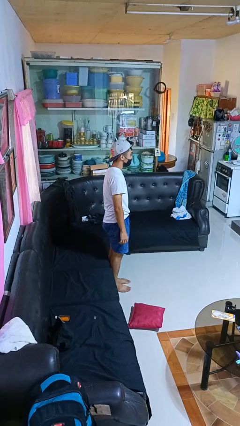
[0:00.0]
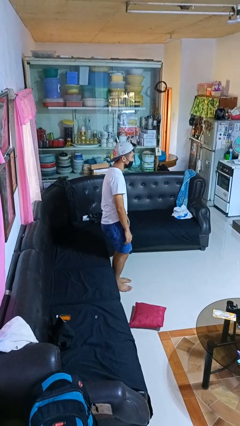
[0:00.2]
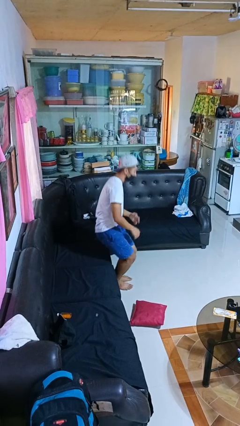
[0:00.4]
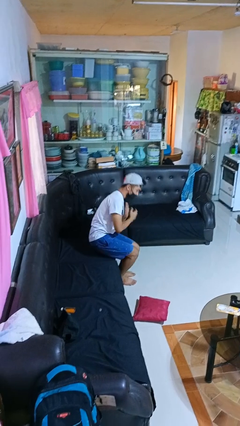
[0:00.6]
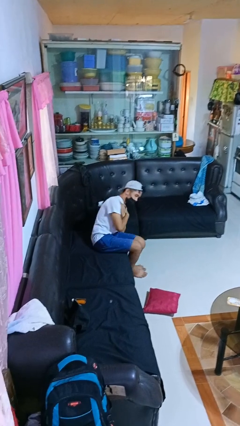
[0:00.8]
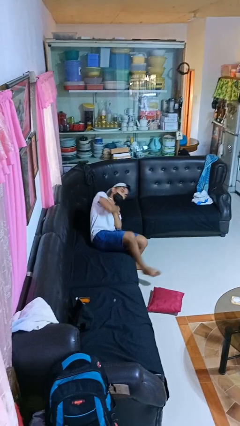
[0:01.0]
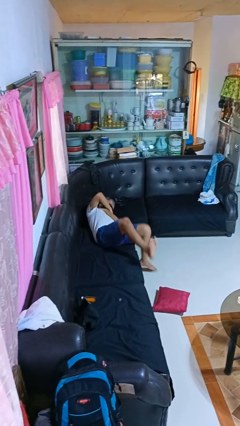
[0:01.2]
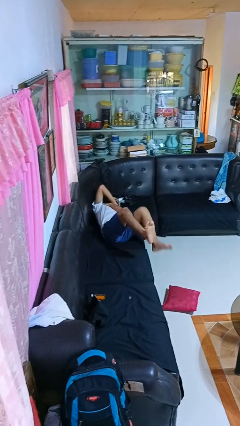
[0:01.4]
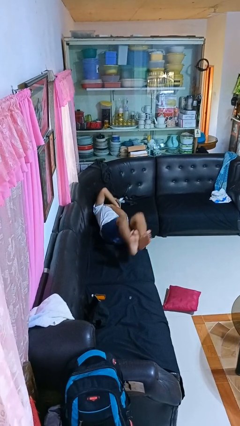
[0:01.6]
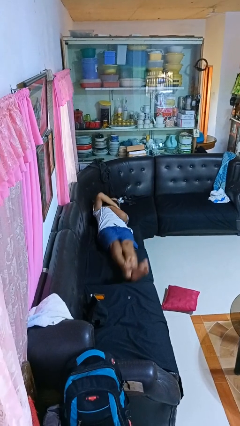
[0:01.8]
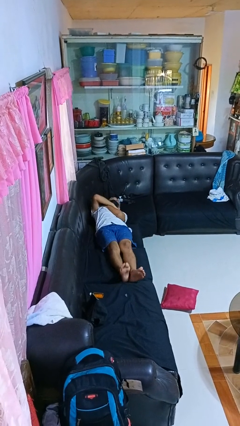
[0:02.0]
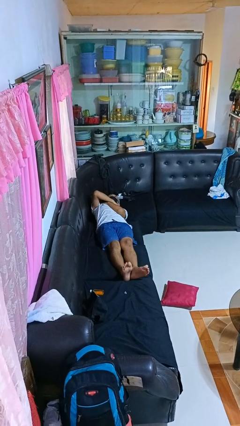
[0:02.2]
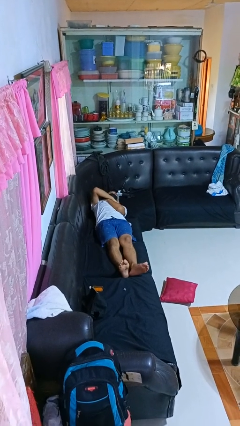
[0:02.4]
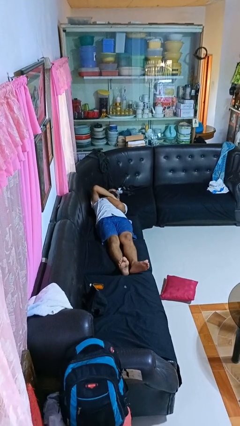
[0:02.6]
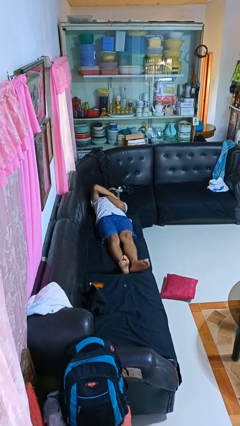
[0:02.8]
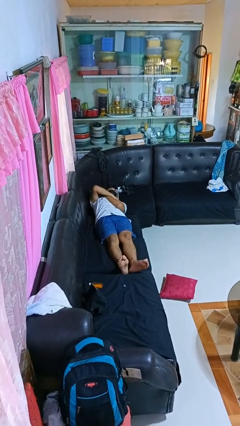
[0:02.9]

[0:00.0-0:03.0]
person lies down on couch

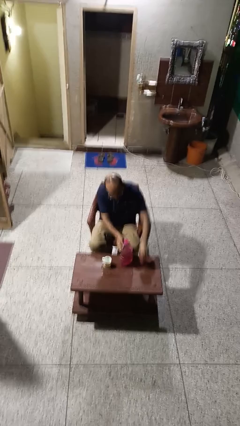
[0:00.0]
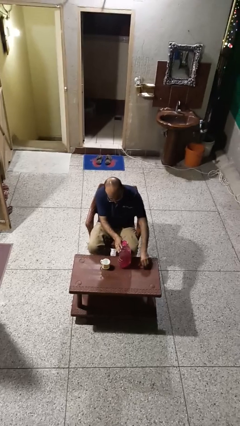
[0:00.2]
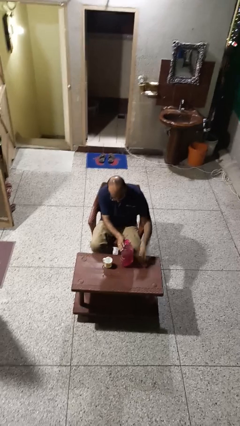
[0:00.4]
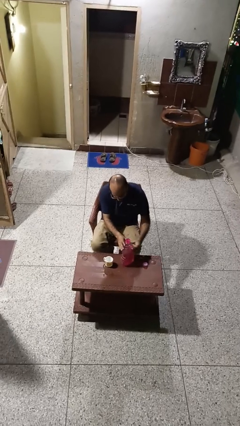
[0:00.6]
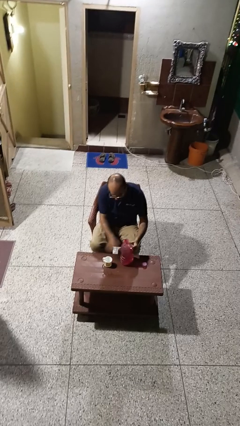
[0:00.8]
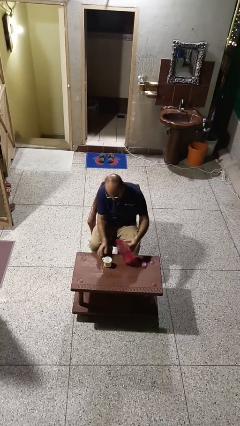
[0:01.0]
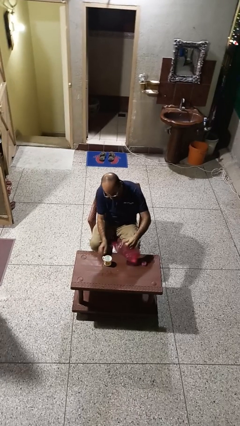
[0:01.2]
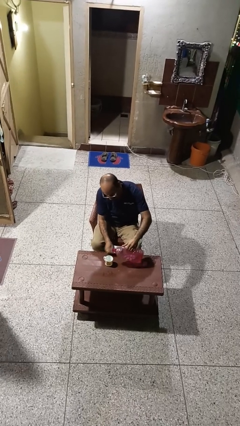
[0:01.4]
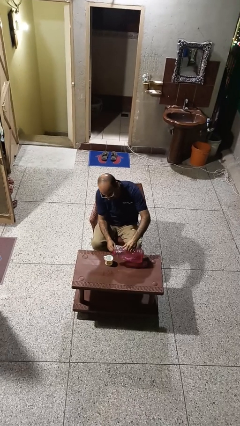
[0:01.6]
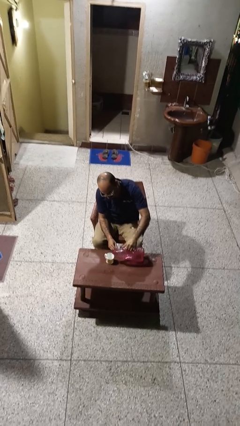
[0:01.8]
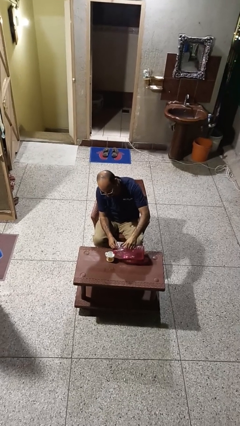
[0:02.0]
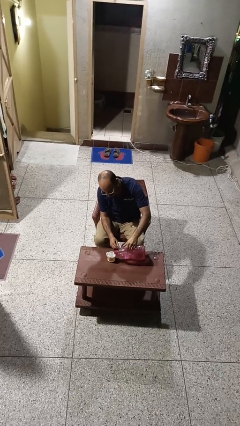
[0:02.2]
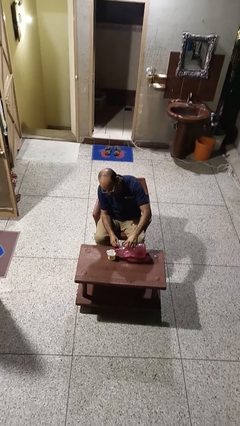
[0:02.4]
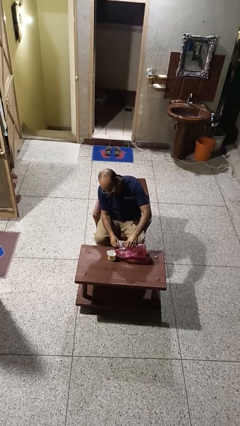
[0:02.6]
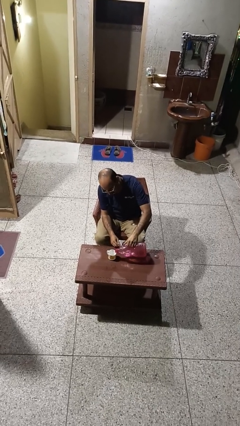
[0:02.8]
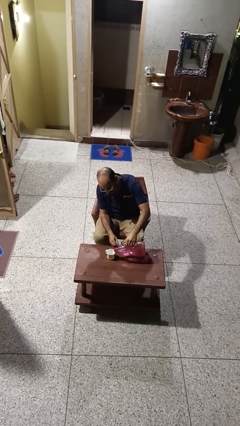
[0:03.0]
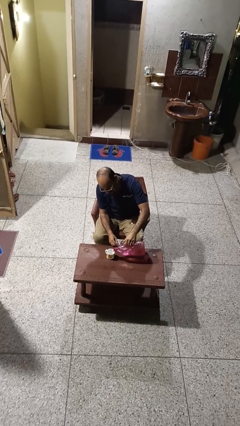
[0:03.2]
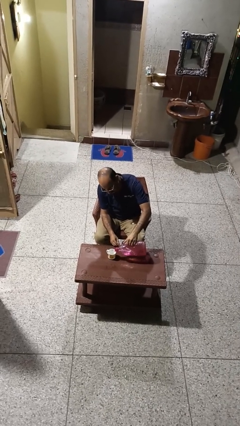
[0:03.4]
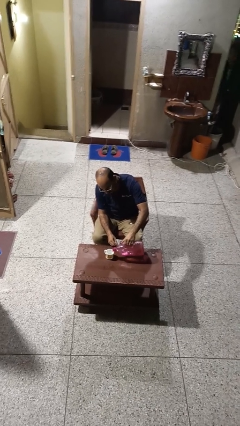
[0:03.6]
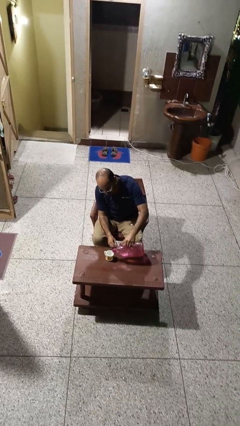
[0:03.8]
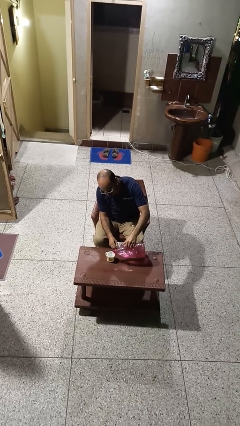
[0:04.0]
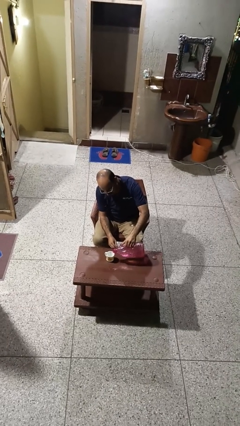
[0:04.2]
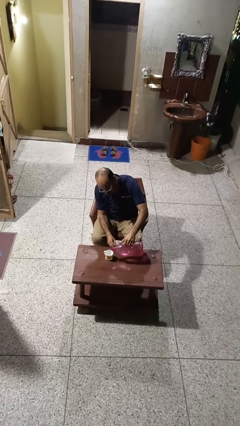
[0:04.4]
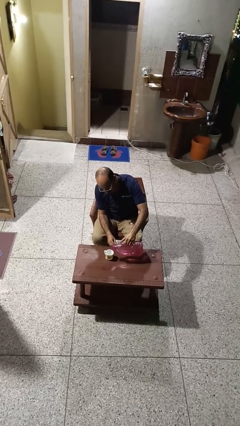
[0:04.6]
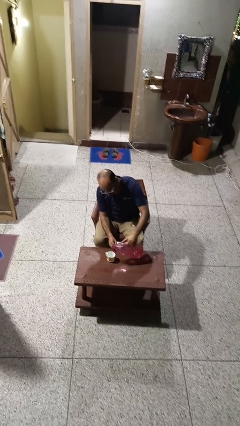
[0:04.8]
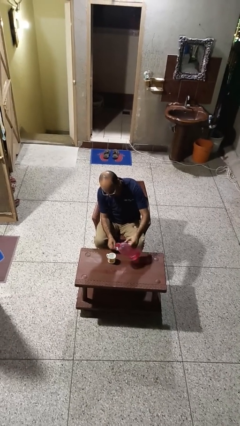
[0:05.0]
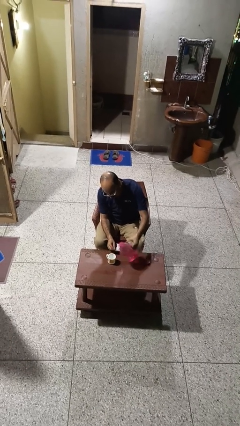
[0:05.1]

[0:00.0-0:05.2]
person pours liquid into cup

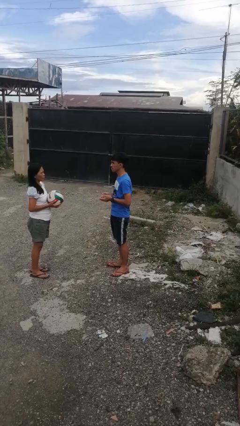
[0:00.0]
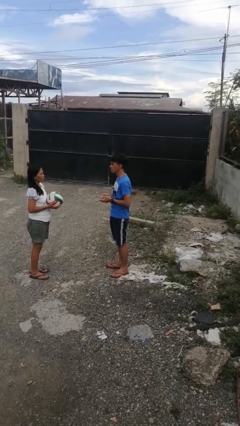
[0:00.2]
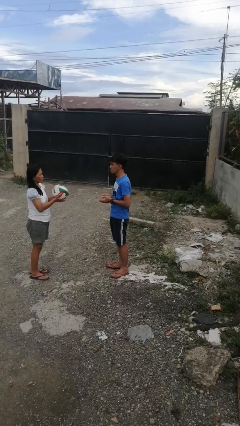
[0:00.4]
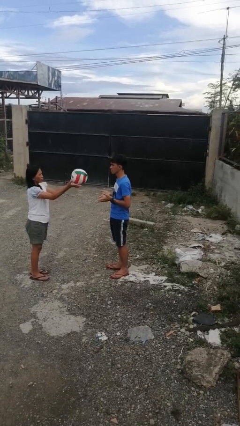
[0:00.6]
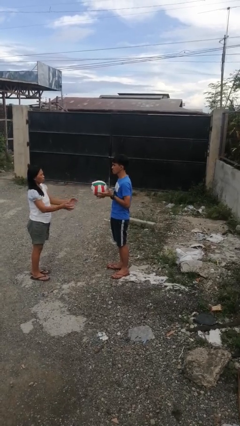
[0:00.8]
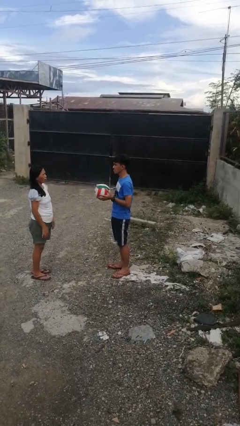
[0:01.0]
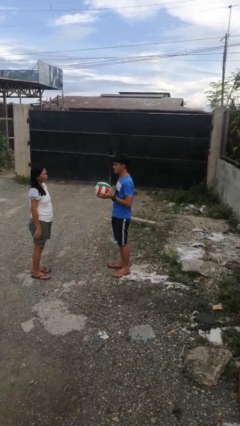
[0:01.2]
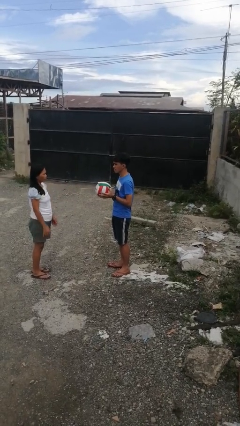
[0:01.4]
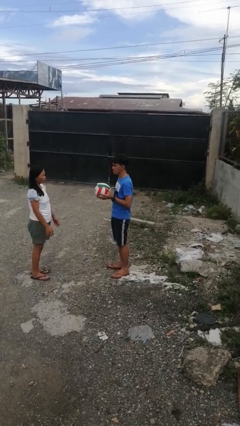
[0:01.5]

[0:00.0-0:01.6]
person catches object from person

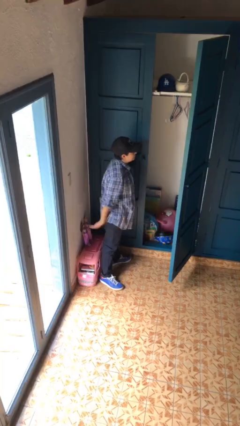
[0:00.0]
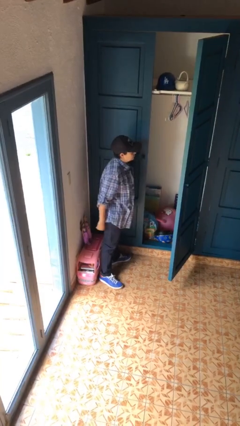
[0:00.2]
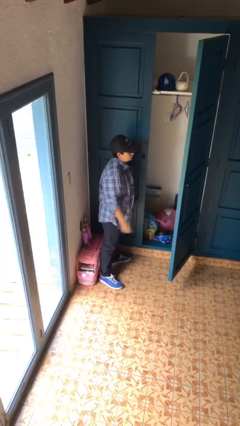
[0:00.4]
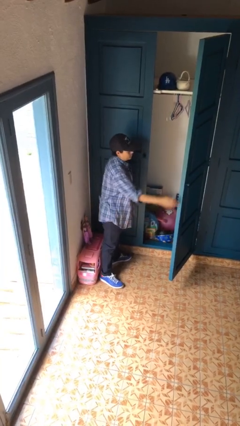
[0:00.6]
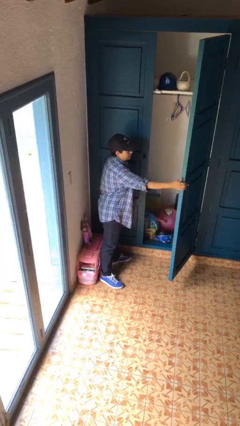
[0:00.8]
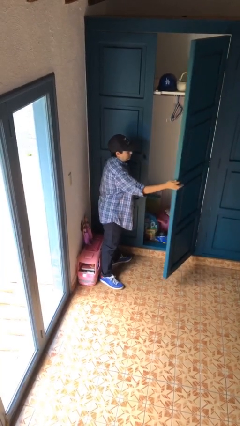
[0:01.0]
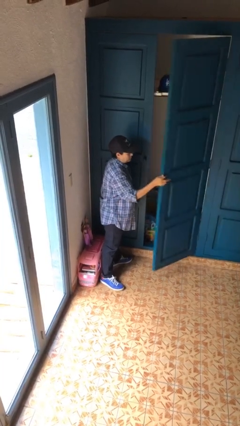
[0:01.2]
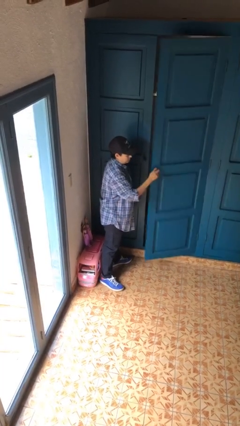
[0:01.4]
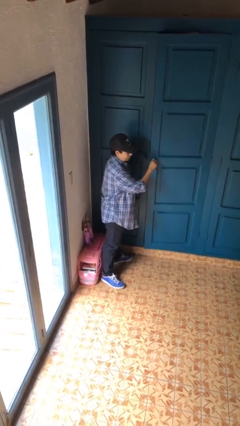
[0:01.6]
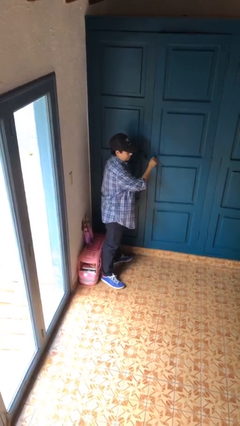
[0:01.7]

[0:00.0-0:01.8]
person closes closet door

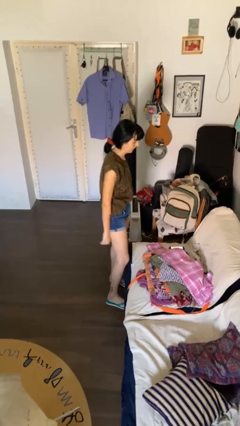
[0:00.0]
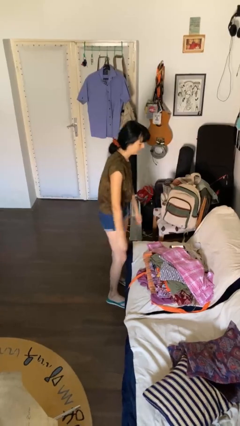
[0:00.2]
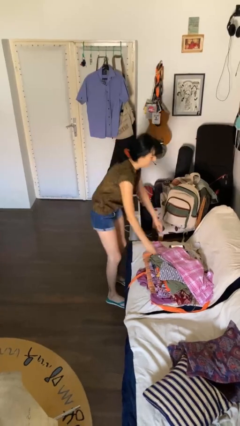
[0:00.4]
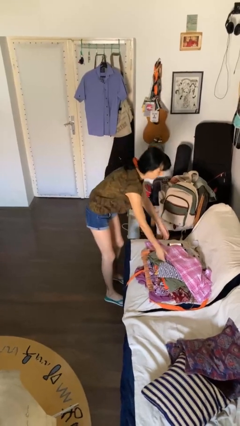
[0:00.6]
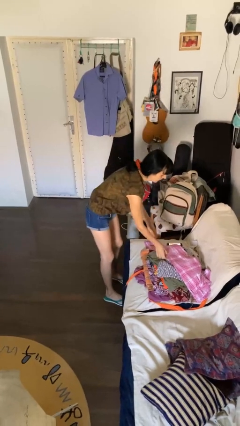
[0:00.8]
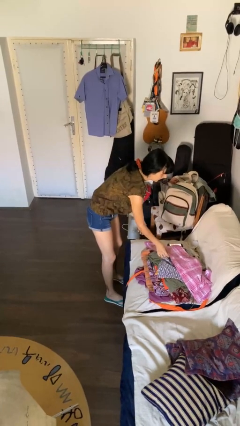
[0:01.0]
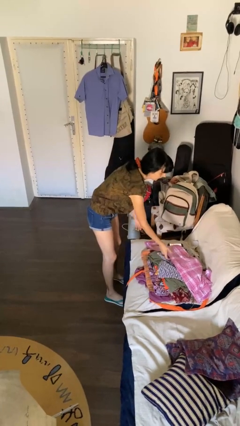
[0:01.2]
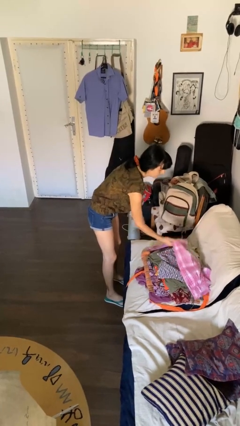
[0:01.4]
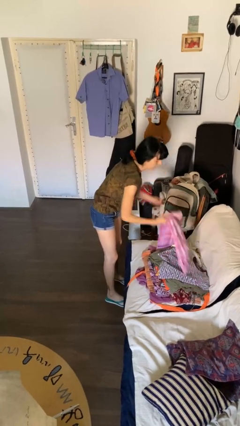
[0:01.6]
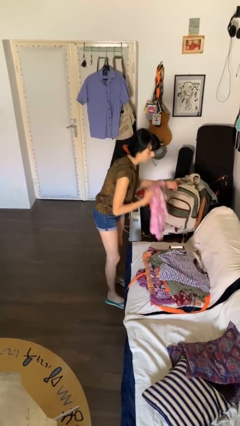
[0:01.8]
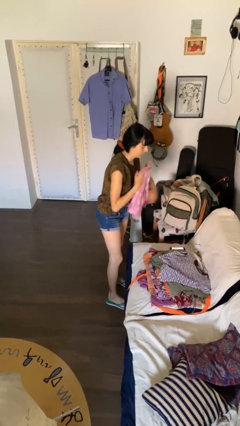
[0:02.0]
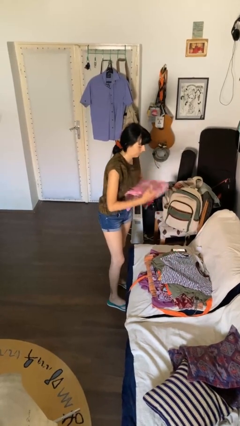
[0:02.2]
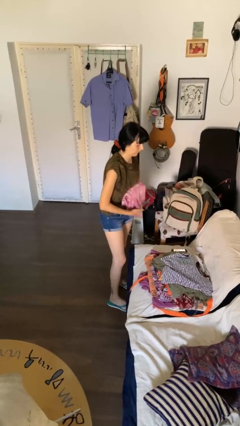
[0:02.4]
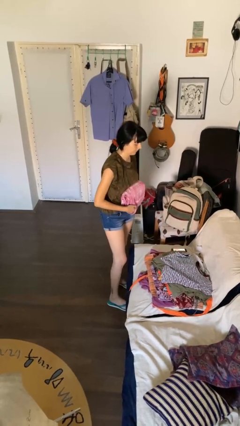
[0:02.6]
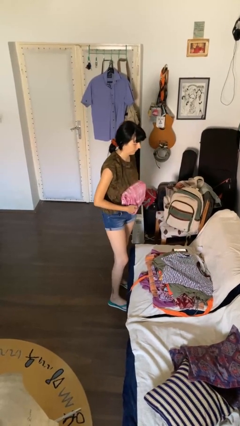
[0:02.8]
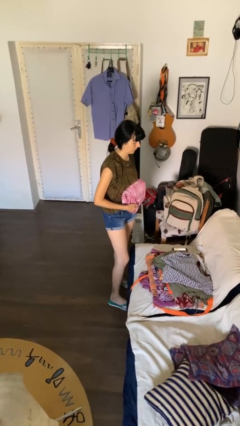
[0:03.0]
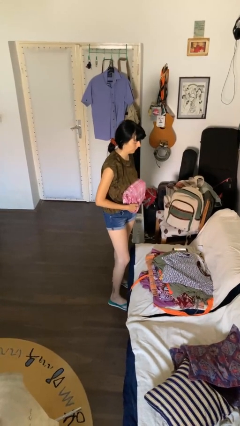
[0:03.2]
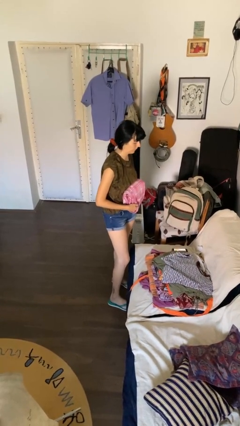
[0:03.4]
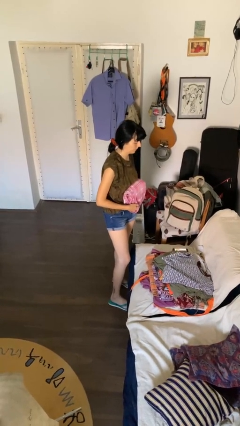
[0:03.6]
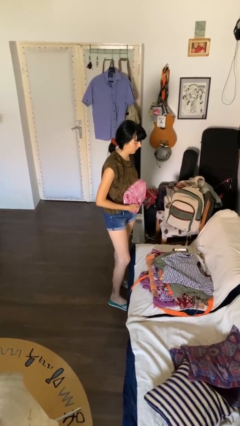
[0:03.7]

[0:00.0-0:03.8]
person folds pants

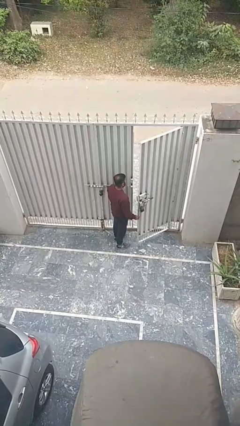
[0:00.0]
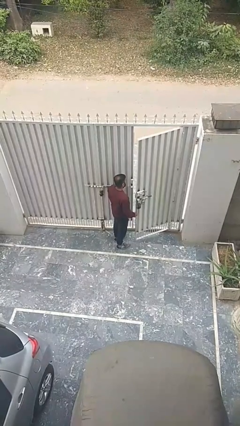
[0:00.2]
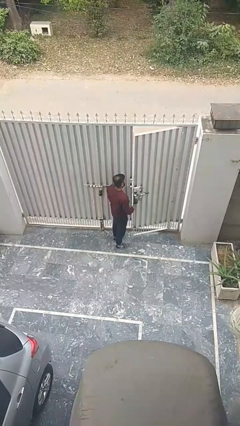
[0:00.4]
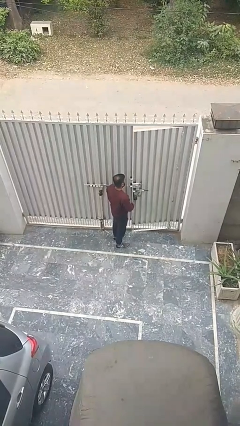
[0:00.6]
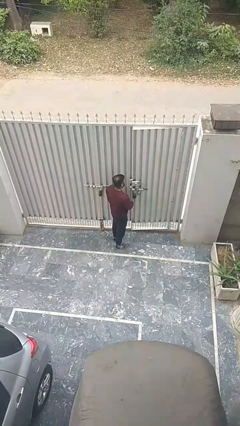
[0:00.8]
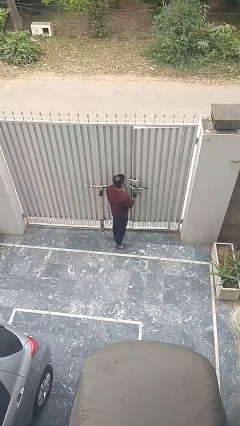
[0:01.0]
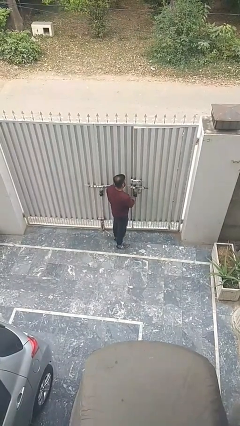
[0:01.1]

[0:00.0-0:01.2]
person closes facility door

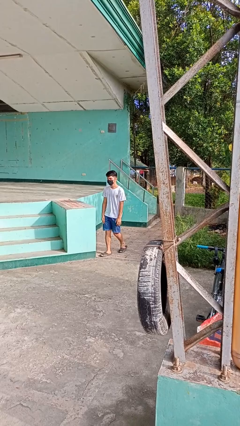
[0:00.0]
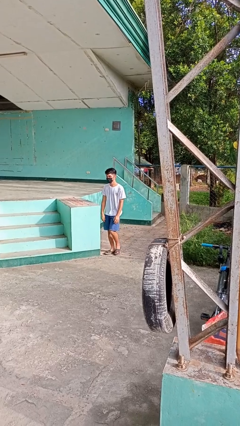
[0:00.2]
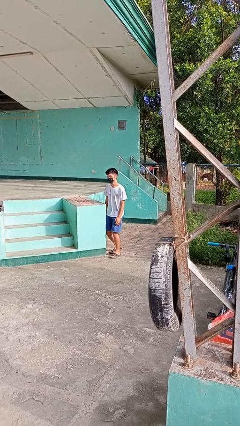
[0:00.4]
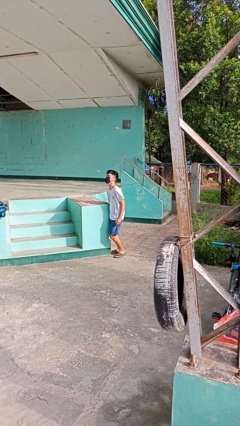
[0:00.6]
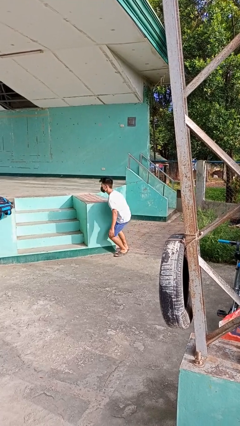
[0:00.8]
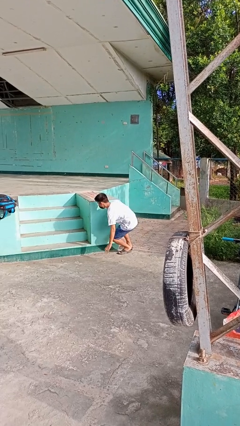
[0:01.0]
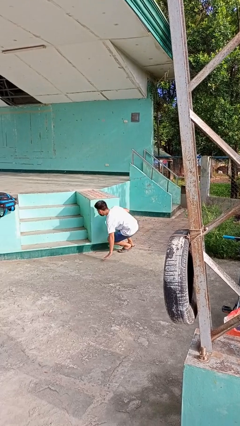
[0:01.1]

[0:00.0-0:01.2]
person trips on object on floor
